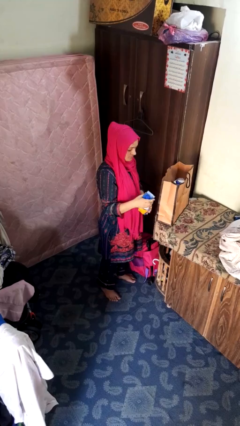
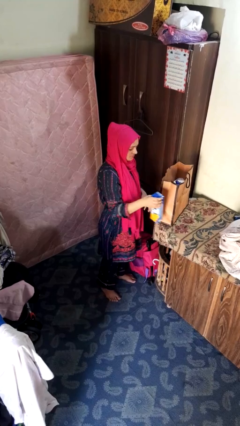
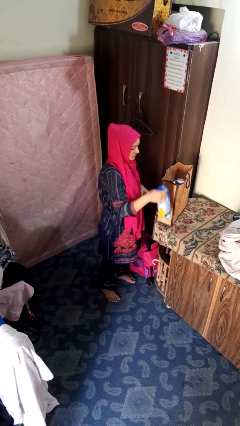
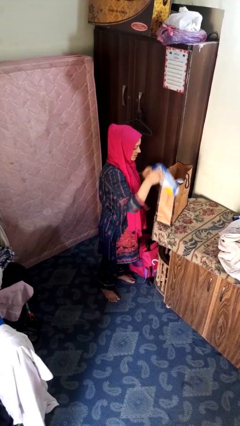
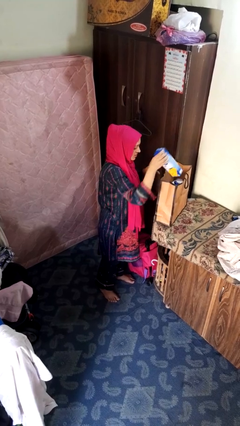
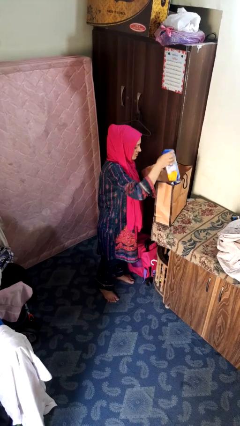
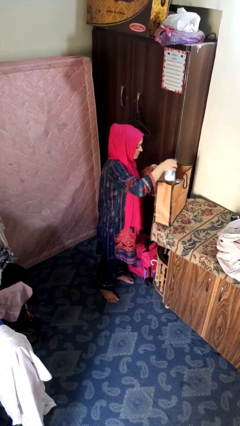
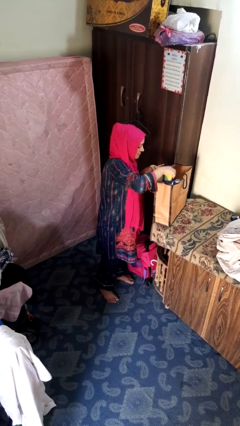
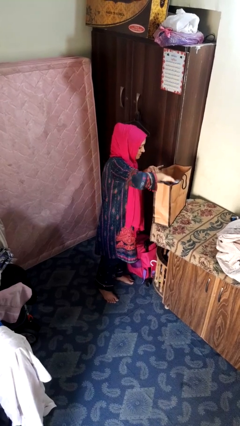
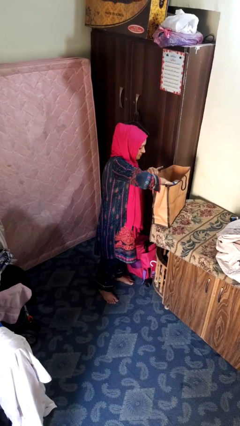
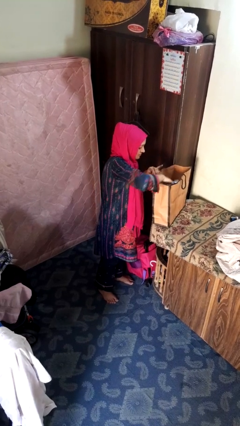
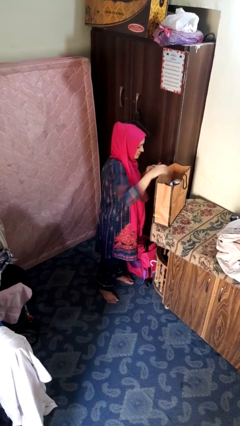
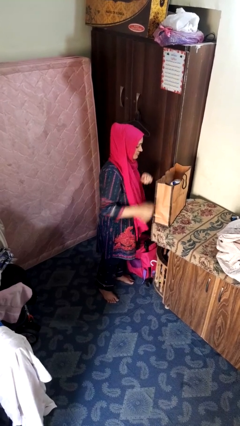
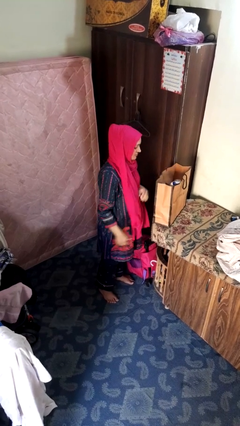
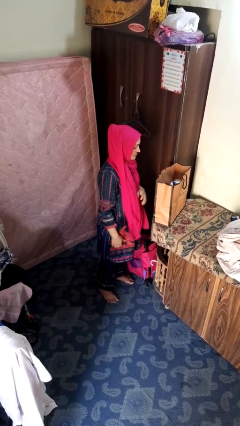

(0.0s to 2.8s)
person puts object into bag

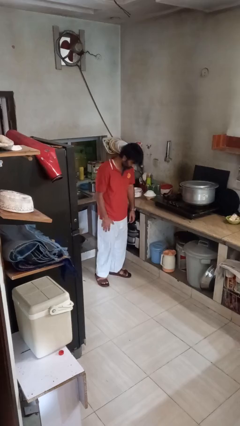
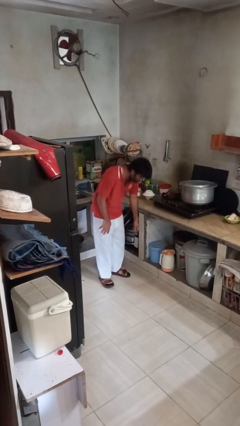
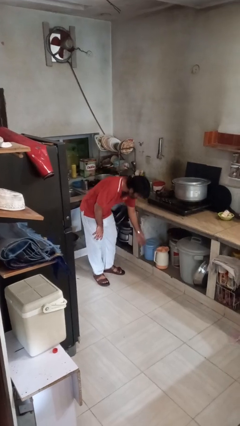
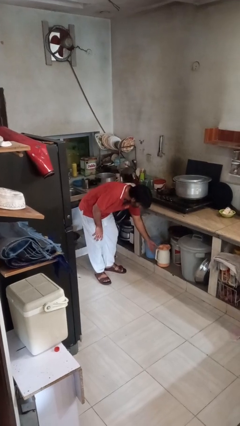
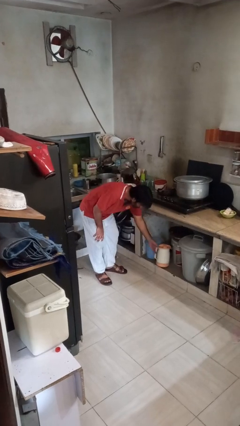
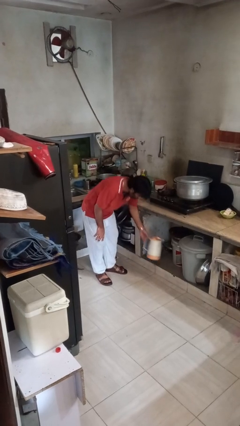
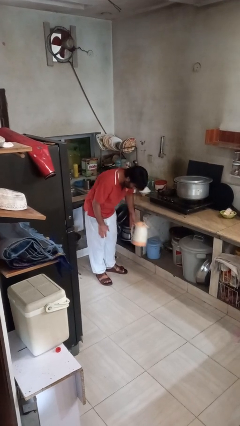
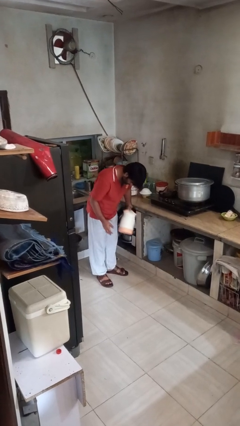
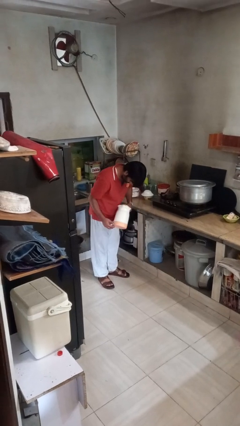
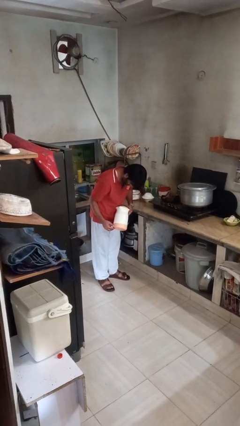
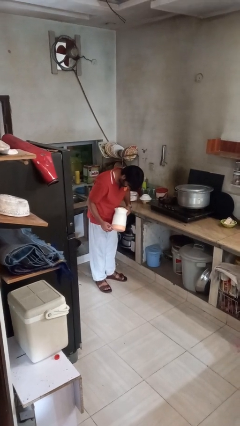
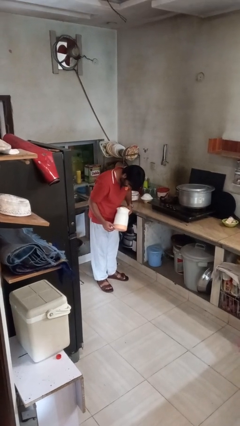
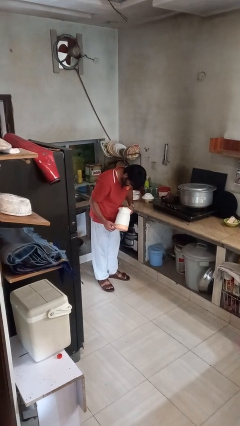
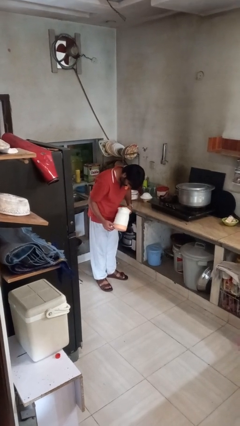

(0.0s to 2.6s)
person picks up object from cabinet

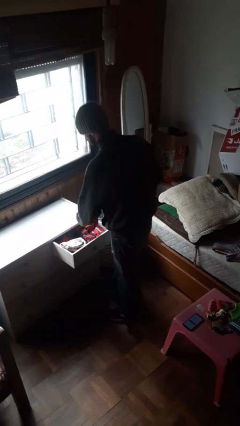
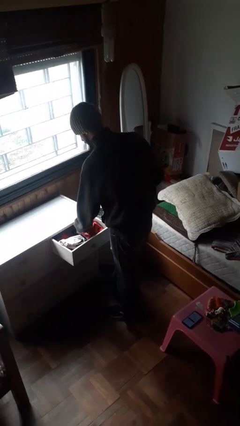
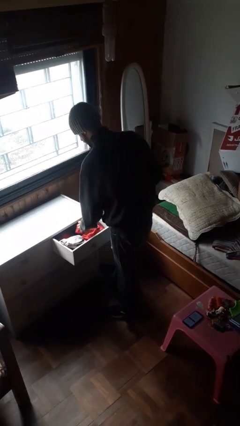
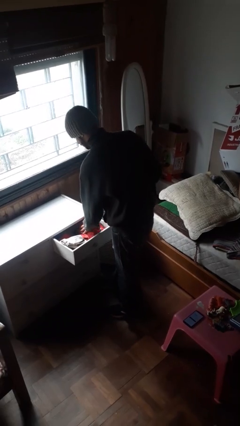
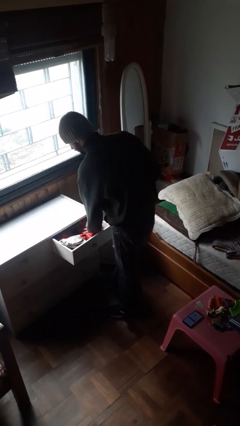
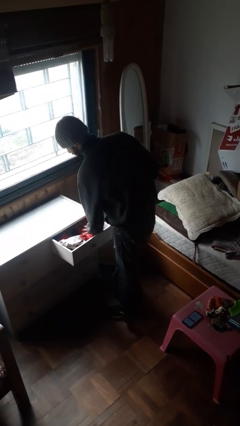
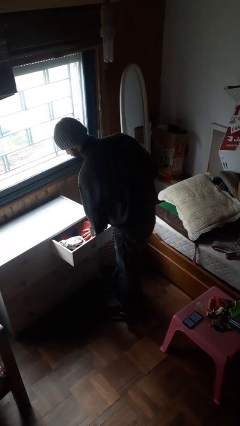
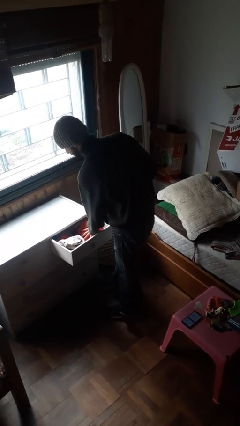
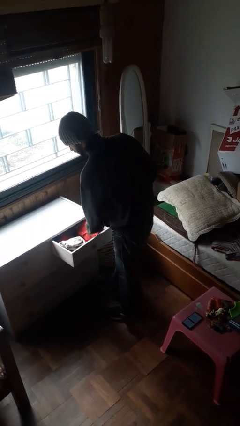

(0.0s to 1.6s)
person puts clothes into dresser

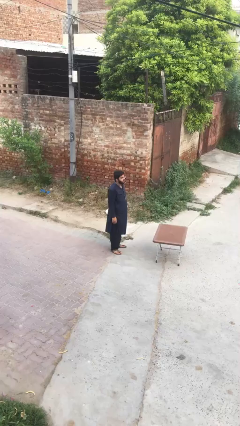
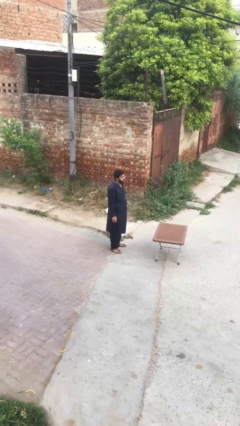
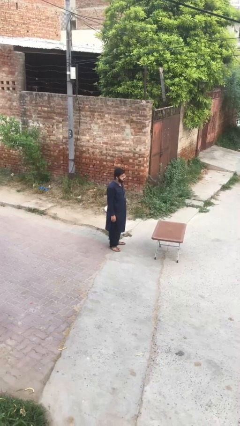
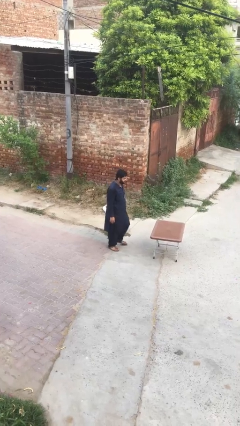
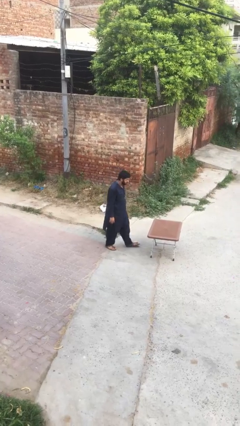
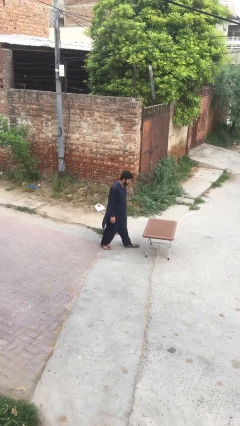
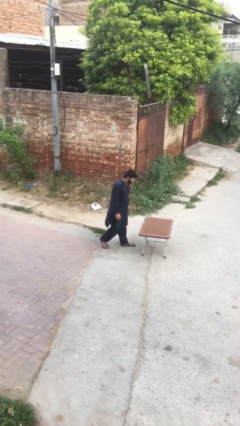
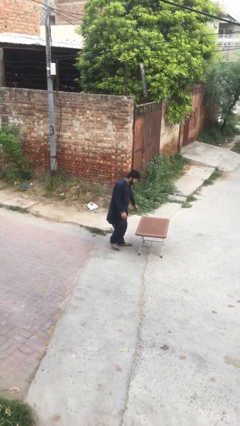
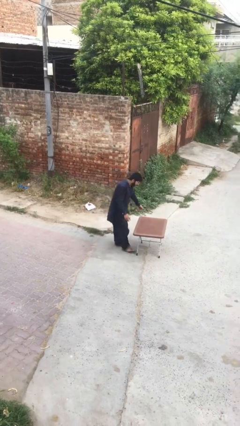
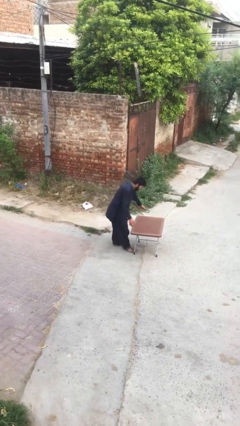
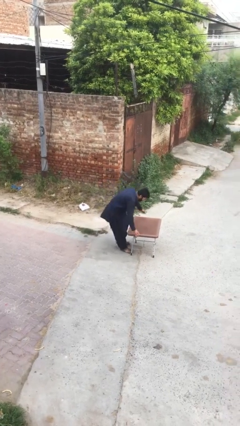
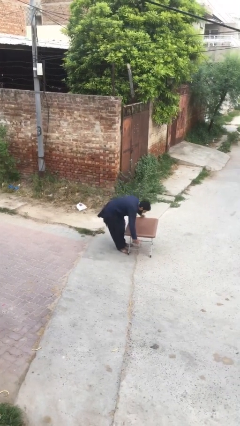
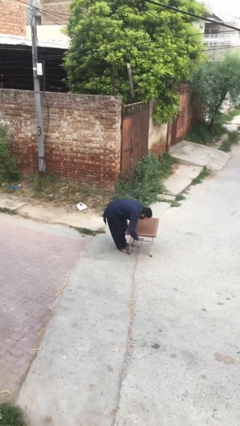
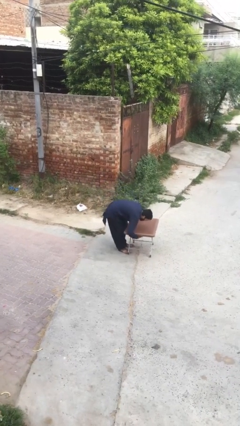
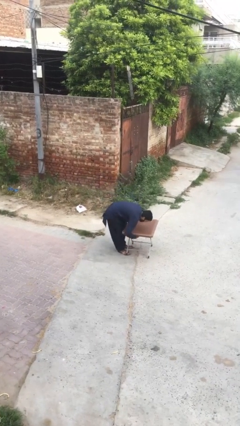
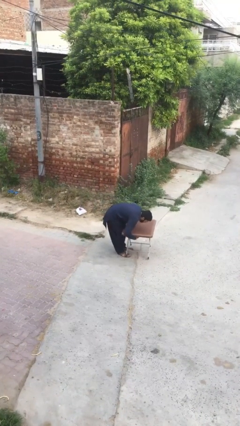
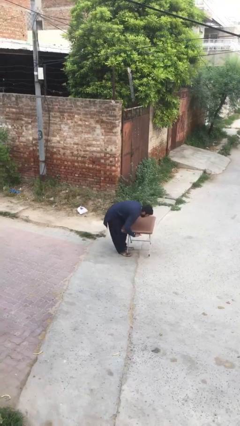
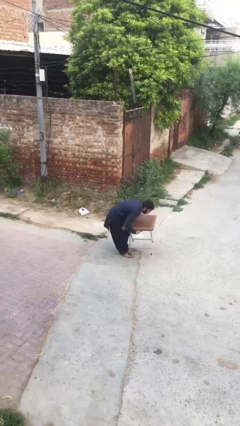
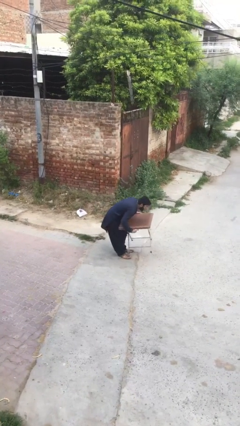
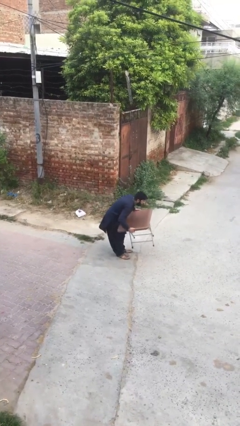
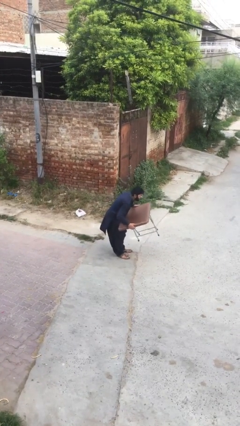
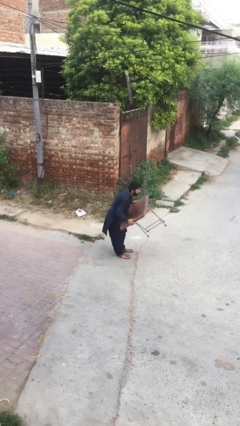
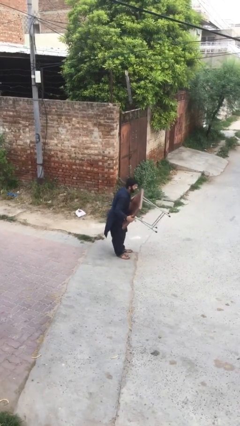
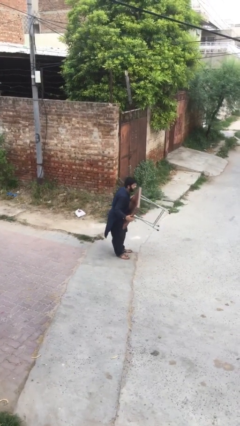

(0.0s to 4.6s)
person picks up object from floor

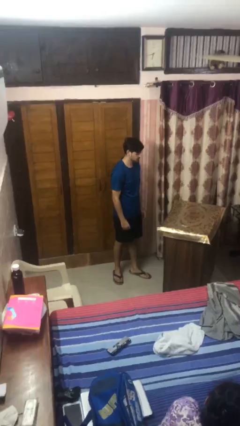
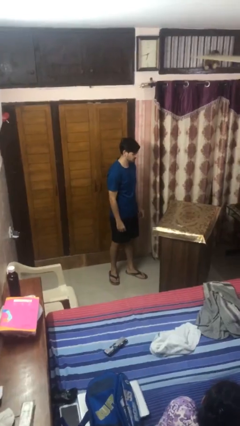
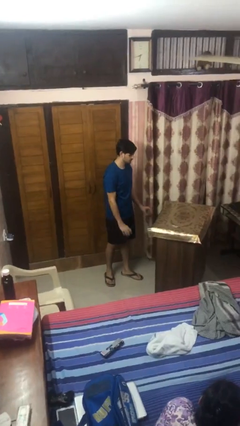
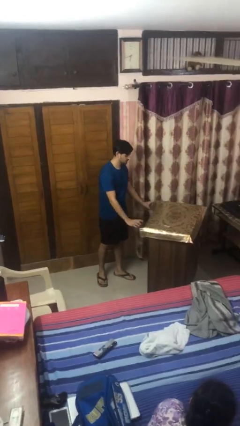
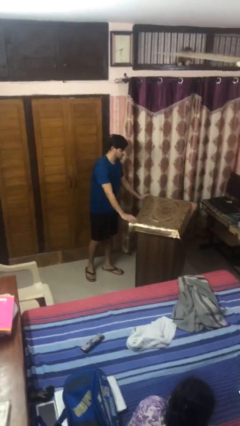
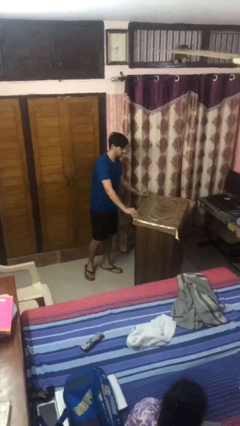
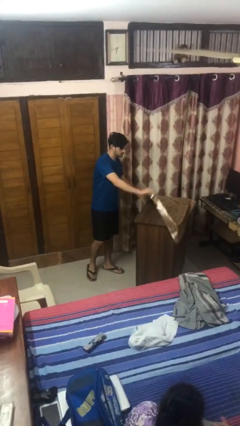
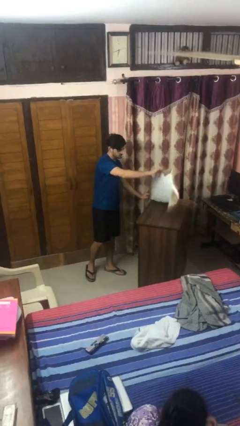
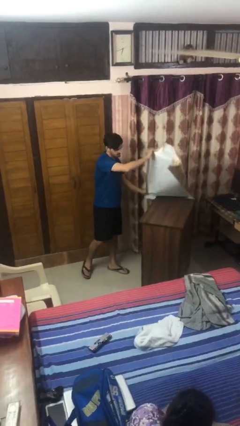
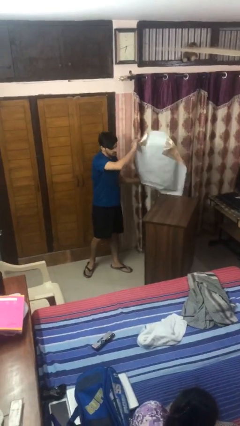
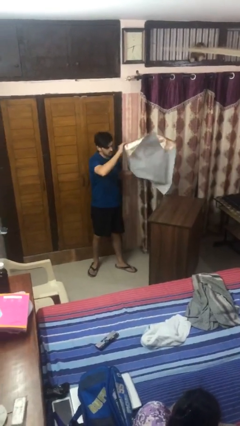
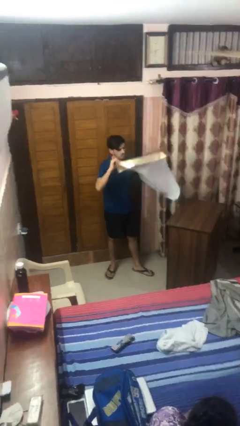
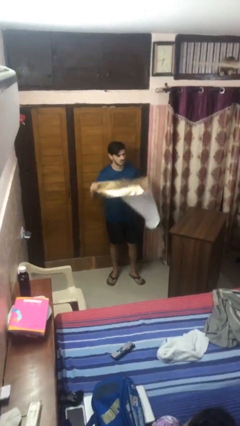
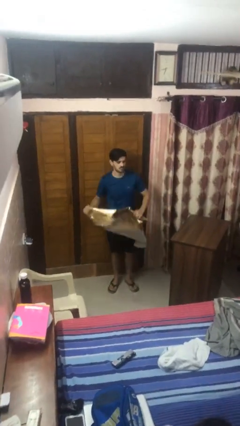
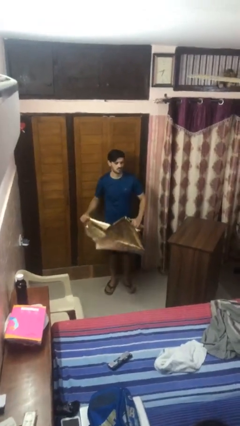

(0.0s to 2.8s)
person folds tablecloth

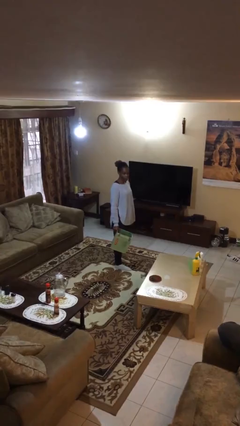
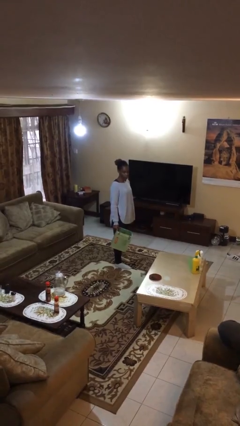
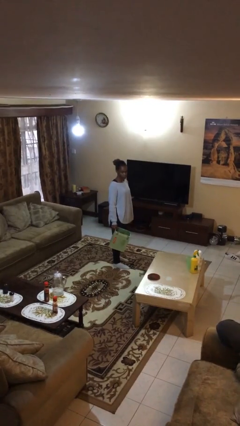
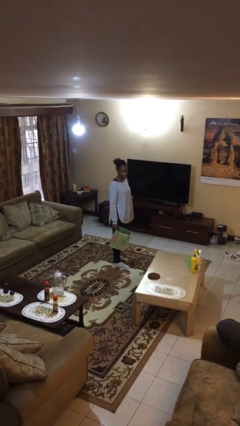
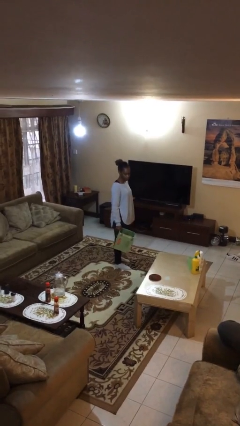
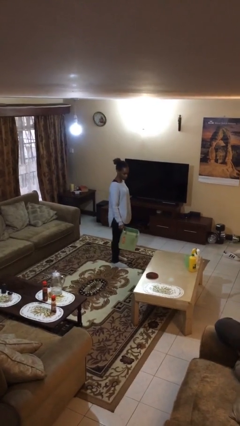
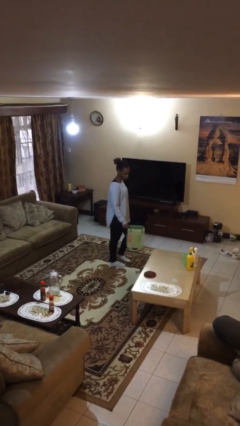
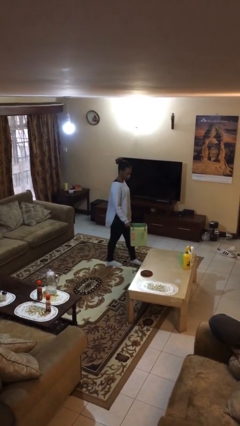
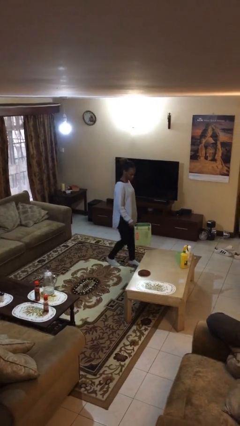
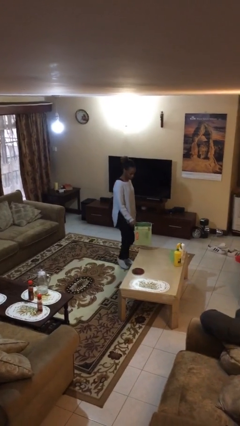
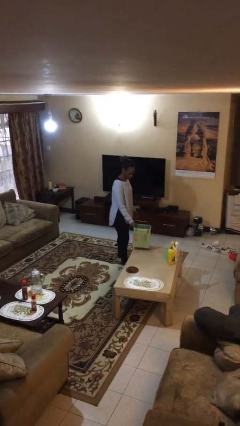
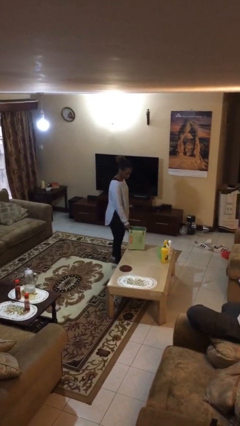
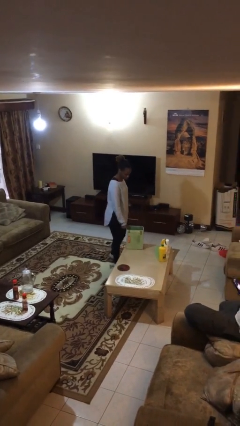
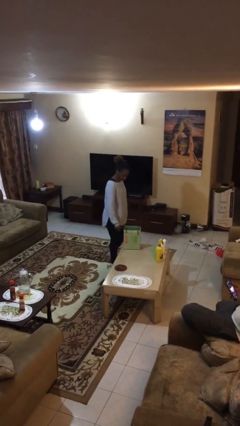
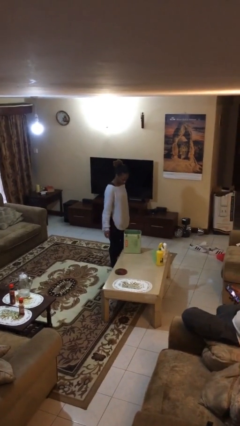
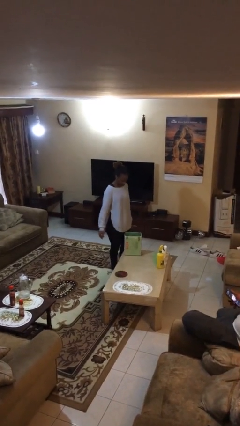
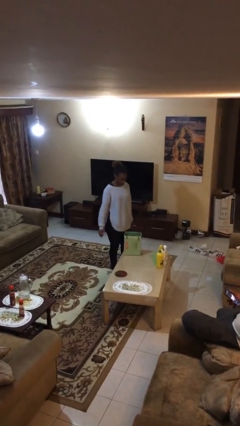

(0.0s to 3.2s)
person puts down object on table
